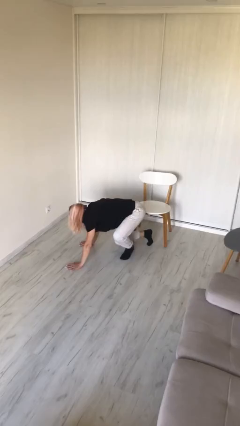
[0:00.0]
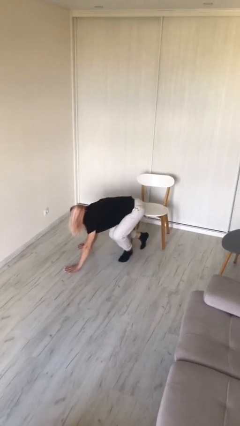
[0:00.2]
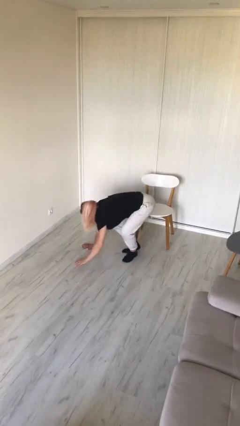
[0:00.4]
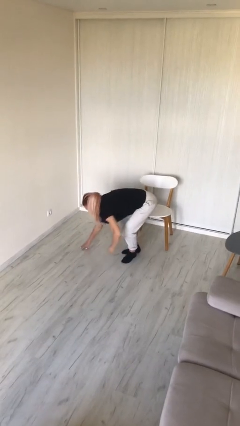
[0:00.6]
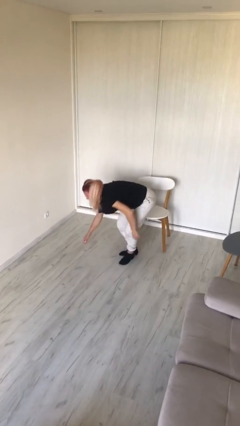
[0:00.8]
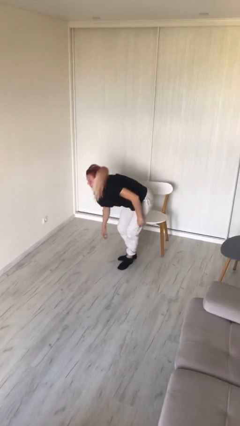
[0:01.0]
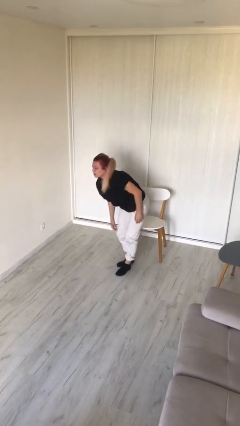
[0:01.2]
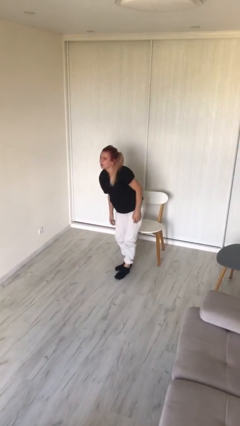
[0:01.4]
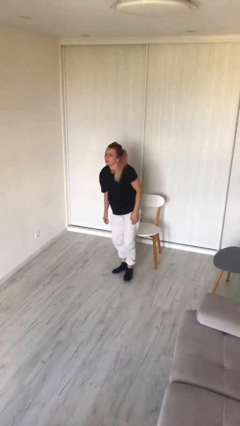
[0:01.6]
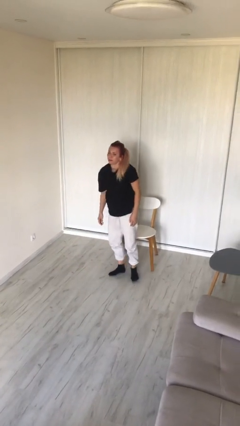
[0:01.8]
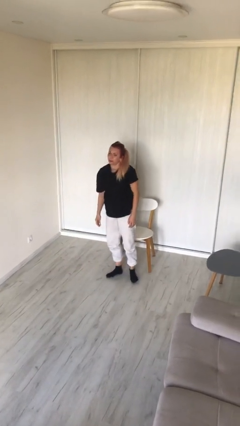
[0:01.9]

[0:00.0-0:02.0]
person stands up from floor

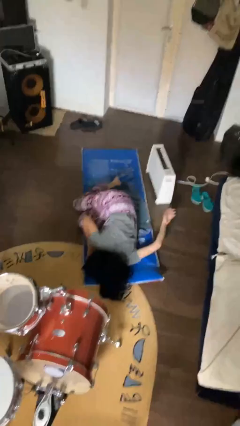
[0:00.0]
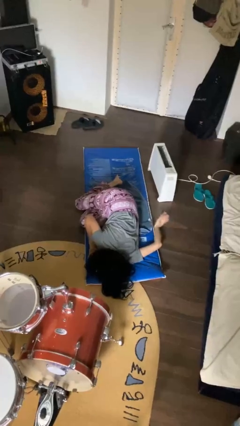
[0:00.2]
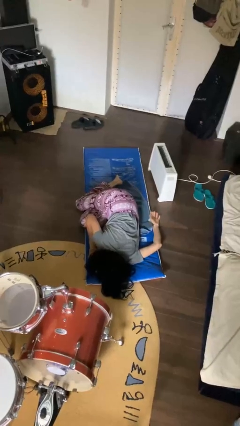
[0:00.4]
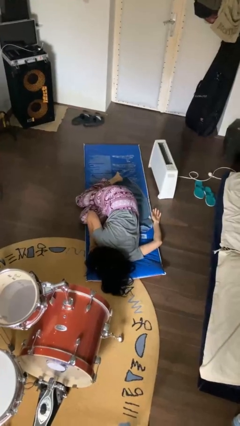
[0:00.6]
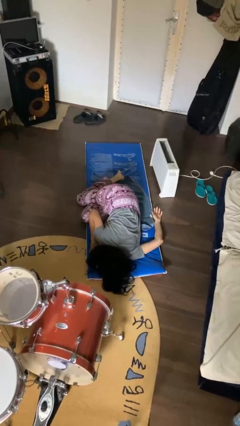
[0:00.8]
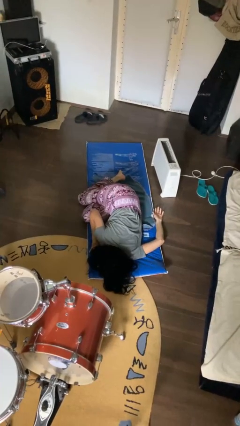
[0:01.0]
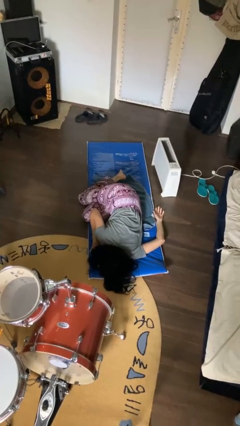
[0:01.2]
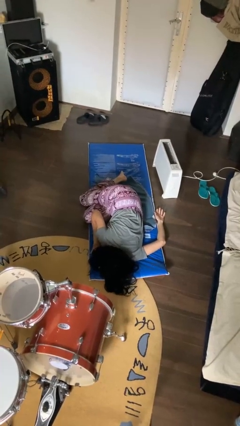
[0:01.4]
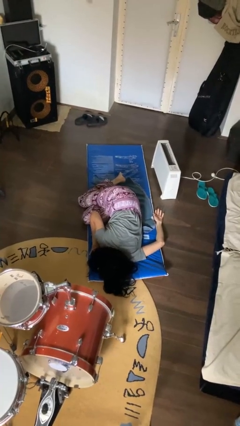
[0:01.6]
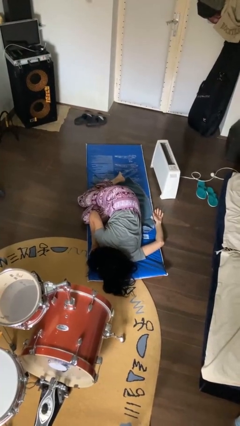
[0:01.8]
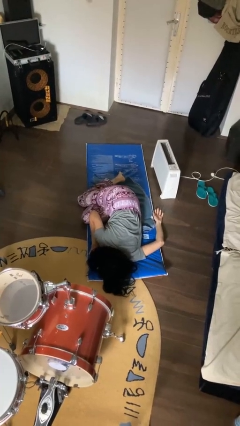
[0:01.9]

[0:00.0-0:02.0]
person lies down on floor

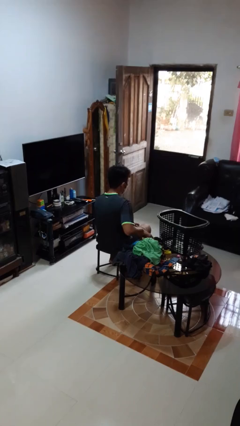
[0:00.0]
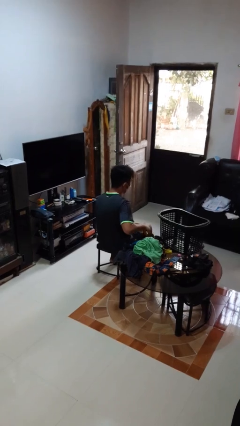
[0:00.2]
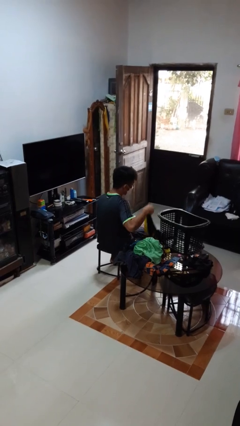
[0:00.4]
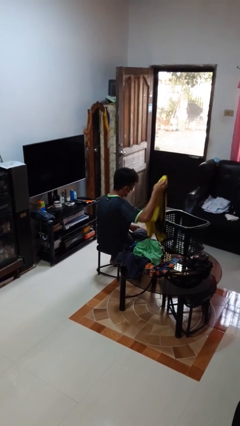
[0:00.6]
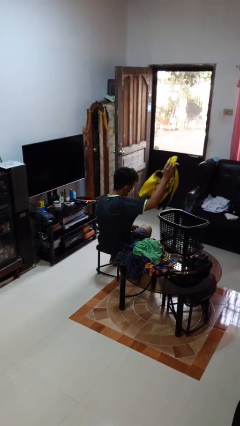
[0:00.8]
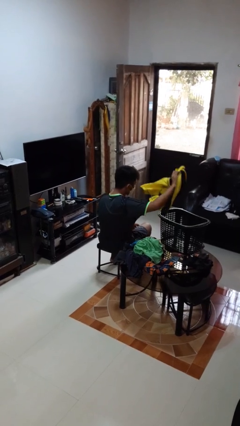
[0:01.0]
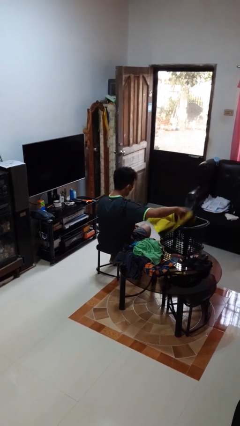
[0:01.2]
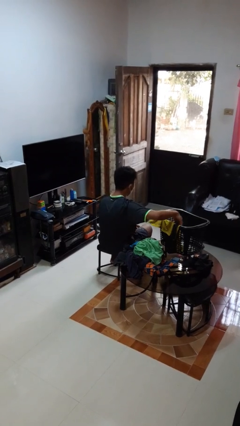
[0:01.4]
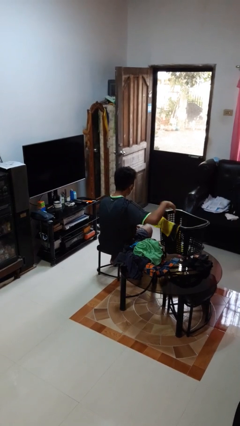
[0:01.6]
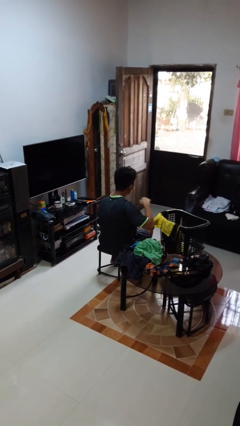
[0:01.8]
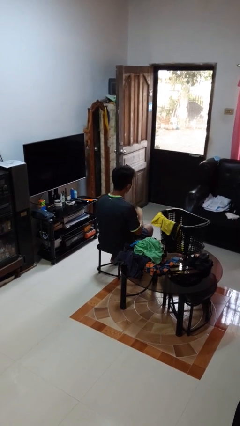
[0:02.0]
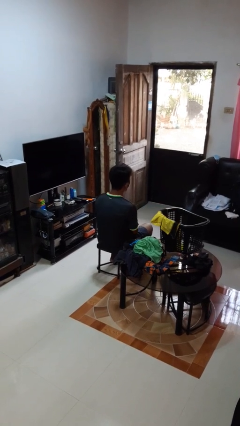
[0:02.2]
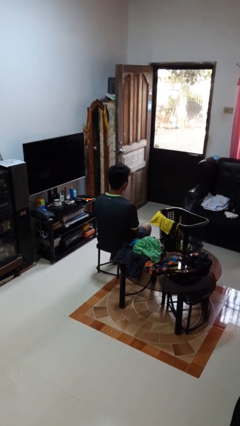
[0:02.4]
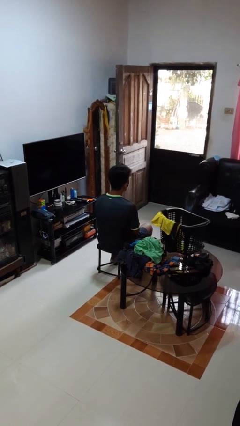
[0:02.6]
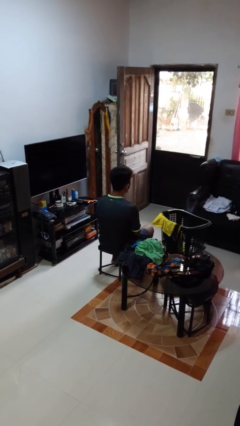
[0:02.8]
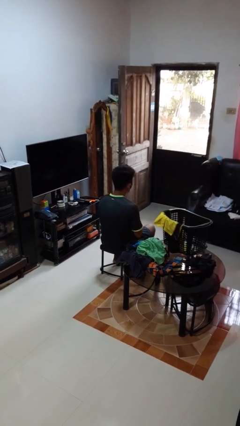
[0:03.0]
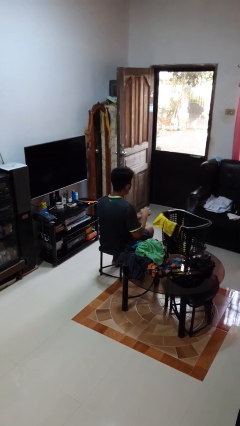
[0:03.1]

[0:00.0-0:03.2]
person puts object into basket

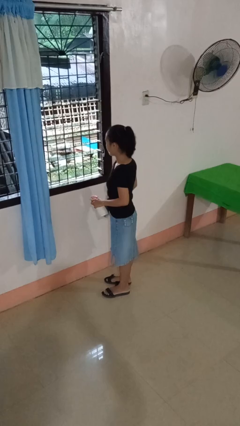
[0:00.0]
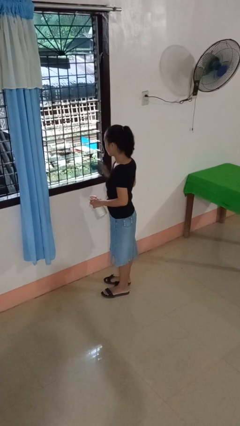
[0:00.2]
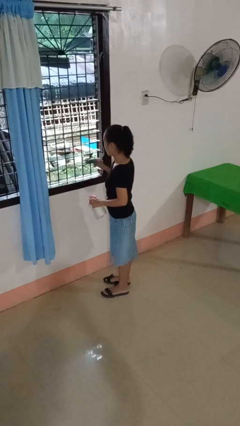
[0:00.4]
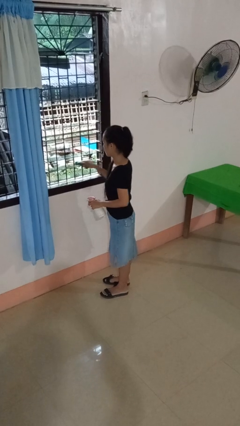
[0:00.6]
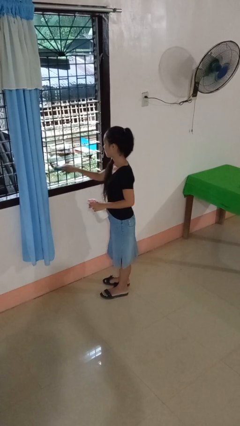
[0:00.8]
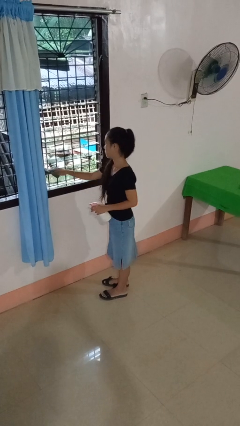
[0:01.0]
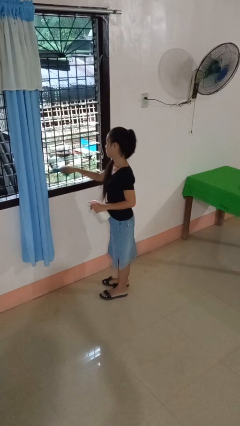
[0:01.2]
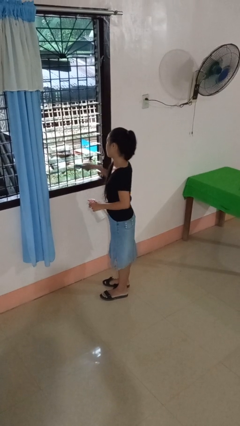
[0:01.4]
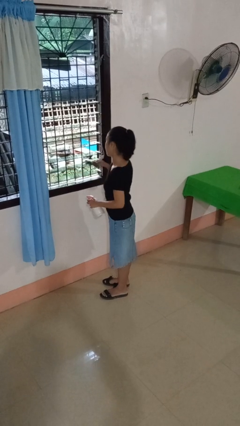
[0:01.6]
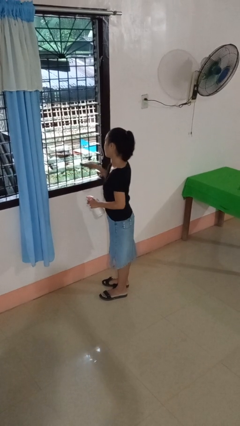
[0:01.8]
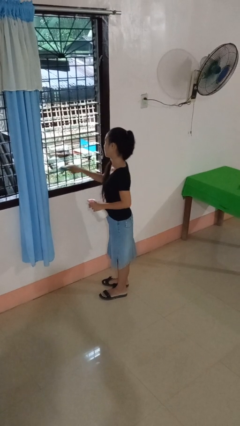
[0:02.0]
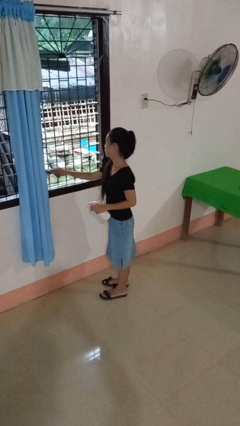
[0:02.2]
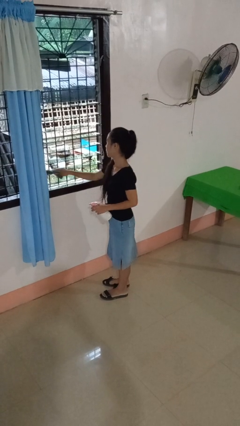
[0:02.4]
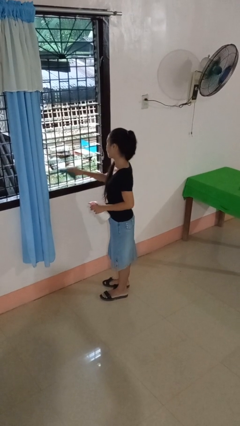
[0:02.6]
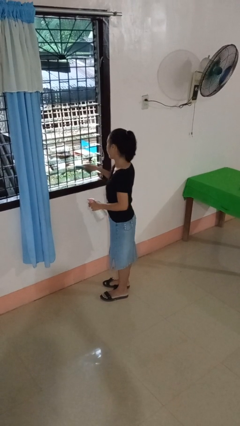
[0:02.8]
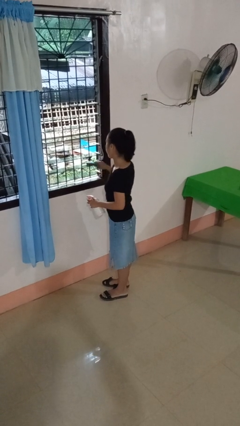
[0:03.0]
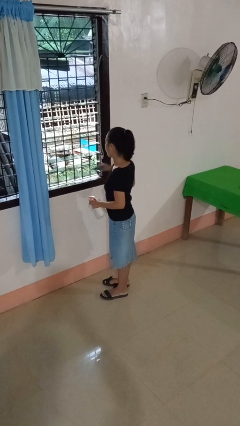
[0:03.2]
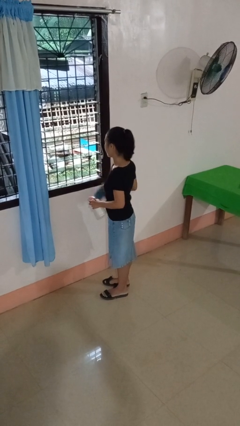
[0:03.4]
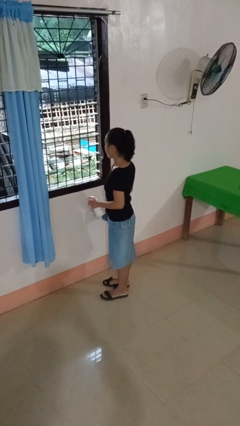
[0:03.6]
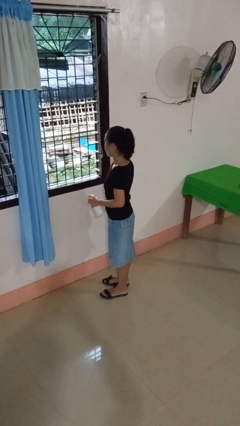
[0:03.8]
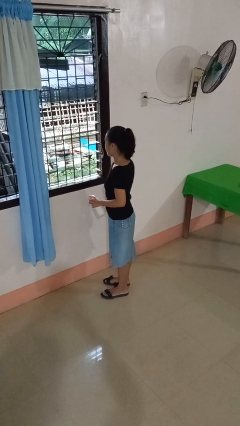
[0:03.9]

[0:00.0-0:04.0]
person washes window

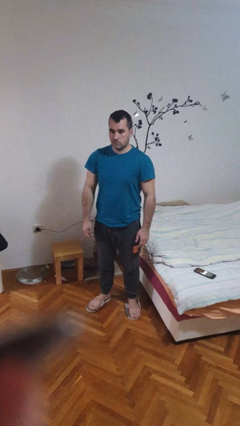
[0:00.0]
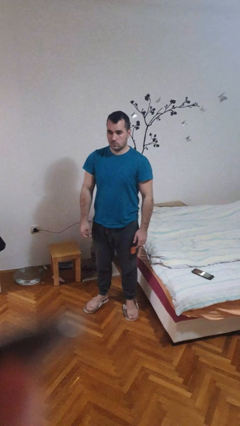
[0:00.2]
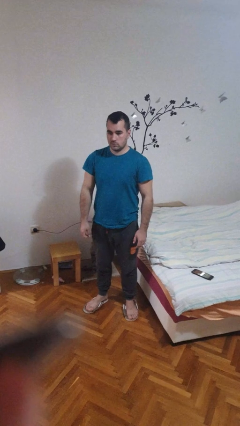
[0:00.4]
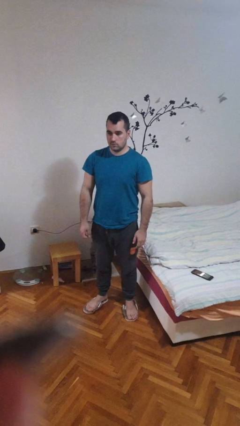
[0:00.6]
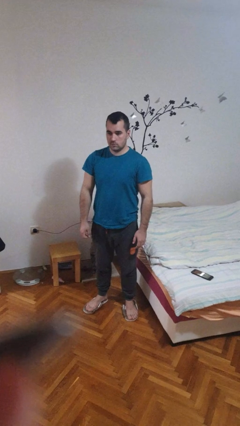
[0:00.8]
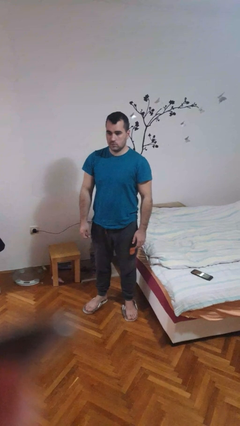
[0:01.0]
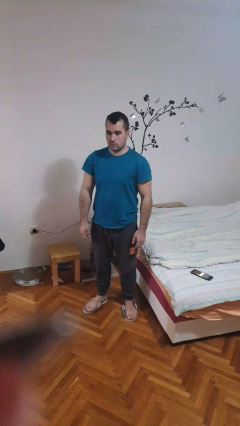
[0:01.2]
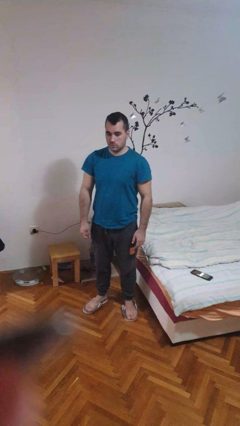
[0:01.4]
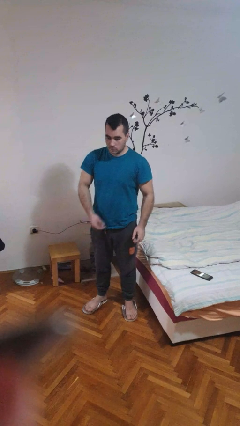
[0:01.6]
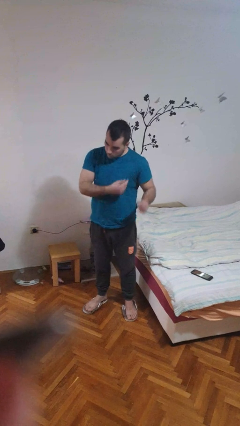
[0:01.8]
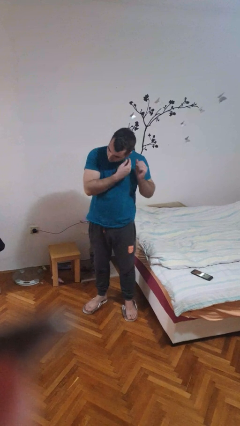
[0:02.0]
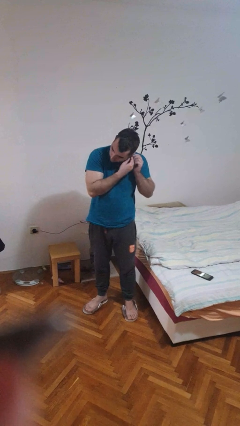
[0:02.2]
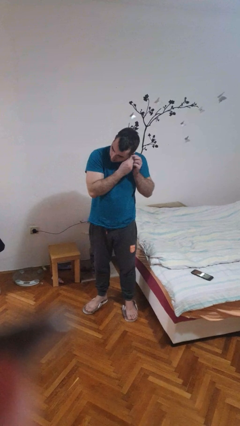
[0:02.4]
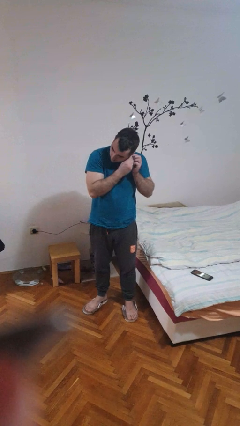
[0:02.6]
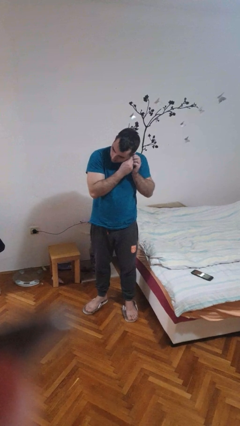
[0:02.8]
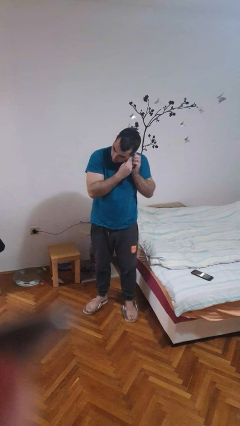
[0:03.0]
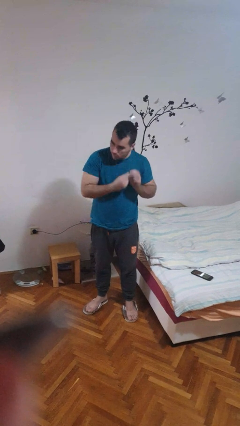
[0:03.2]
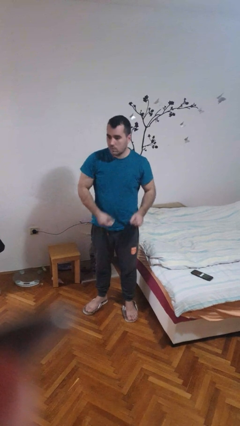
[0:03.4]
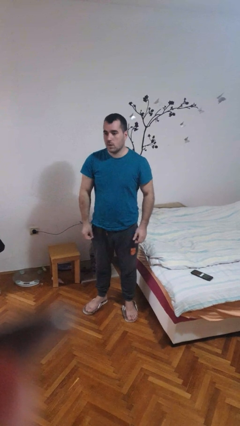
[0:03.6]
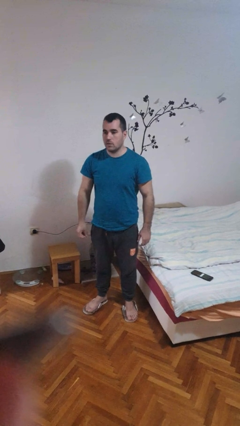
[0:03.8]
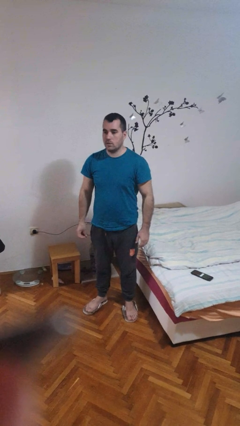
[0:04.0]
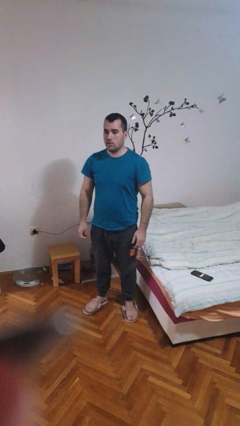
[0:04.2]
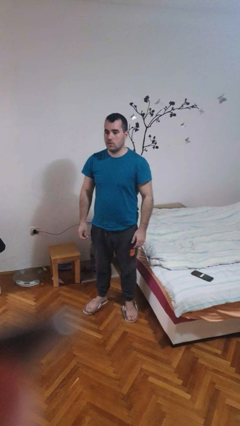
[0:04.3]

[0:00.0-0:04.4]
person puts on earrings

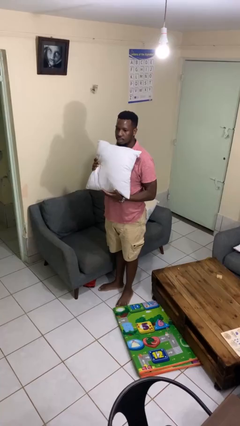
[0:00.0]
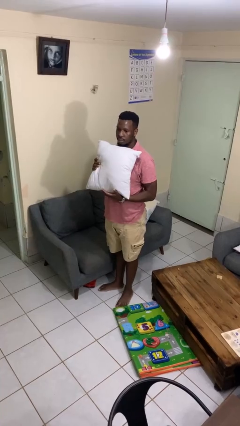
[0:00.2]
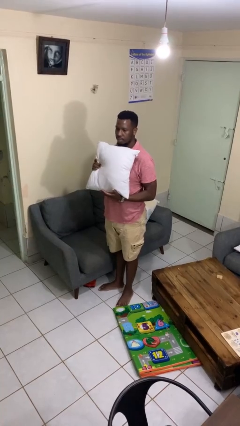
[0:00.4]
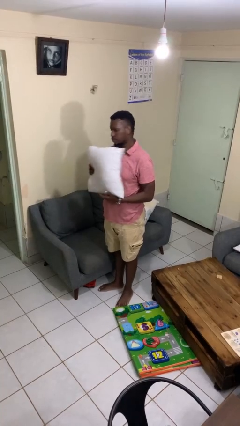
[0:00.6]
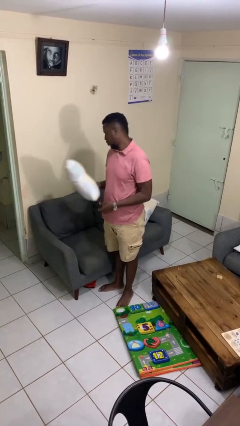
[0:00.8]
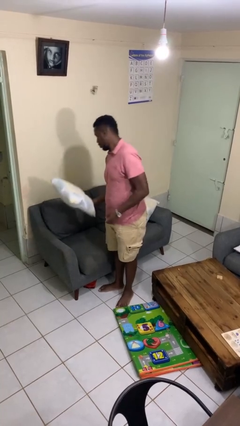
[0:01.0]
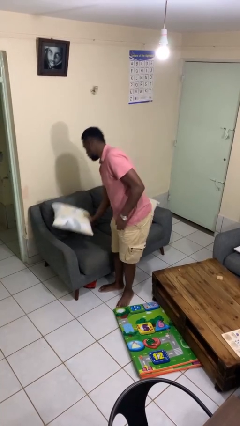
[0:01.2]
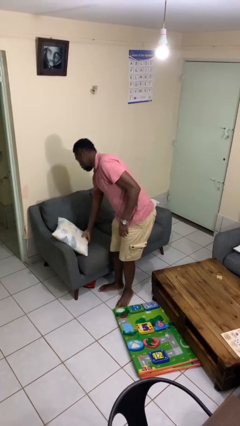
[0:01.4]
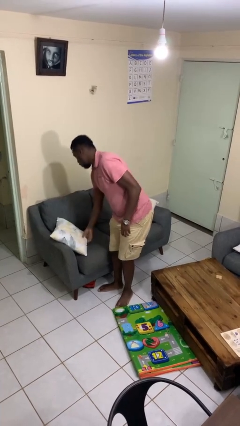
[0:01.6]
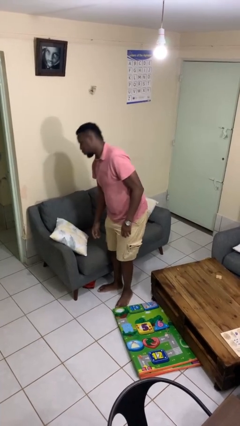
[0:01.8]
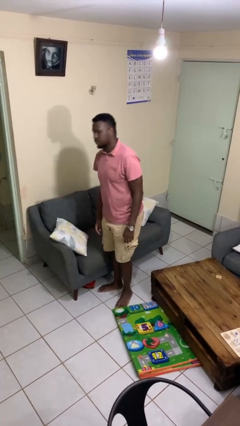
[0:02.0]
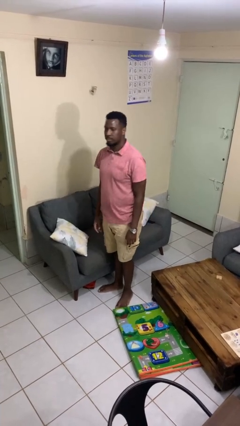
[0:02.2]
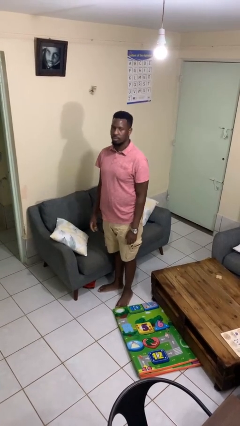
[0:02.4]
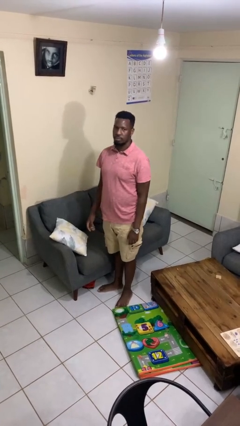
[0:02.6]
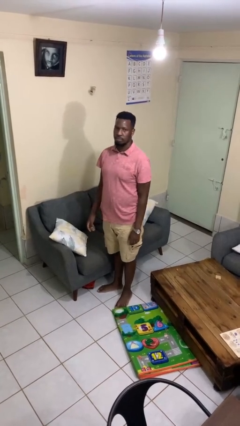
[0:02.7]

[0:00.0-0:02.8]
person puts down object on couch
